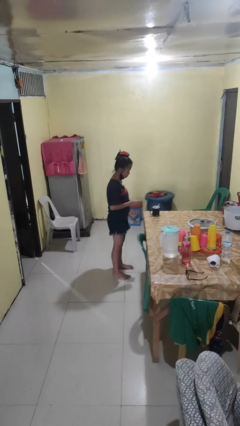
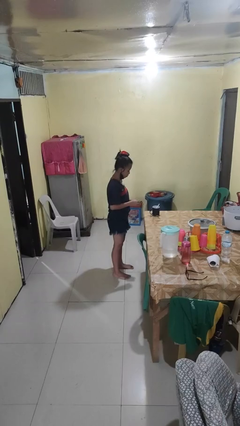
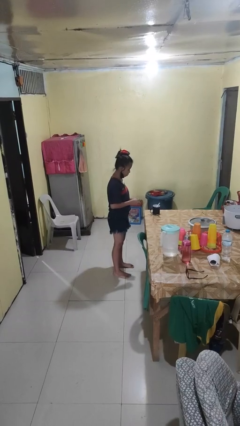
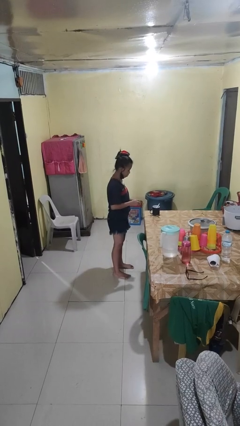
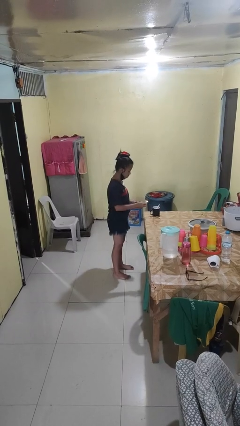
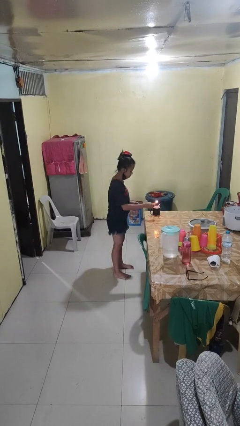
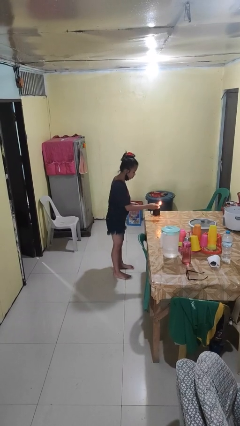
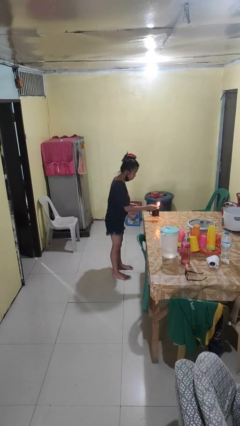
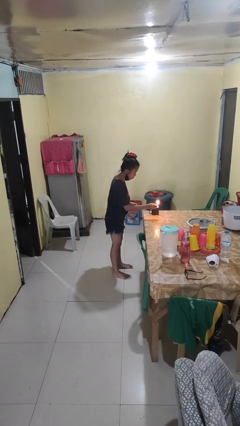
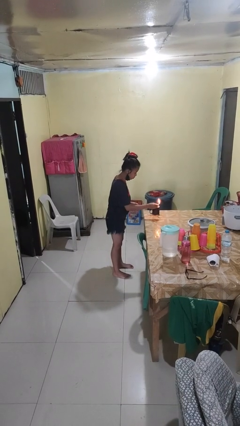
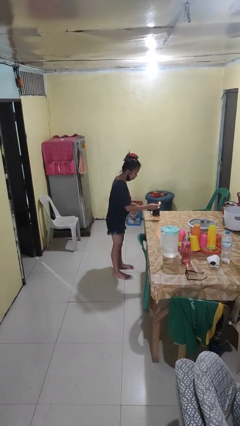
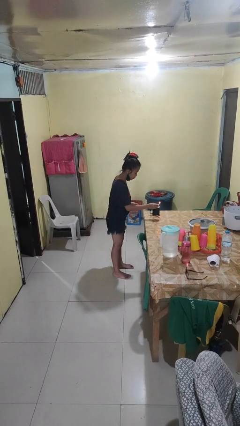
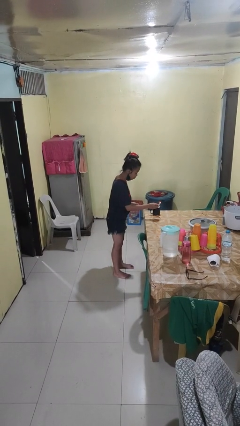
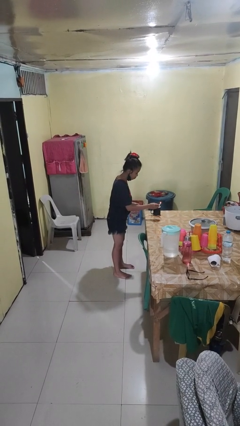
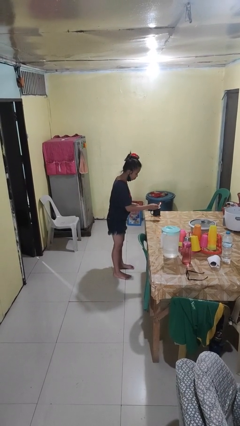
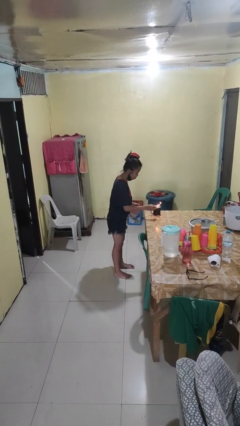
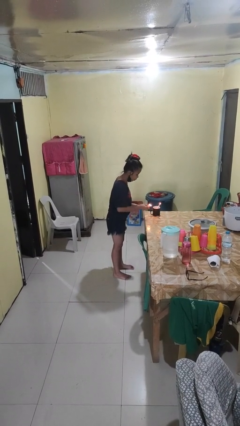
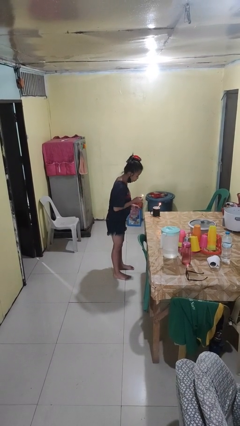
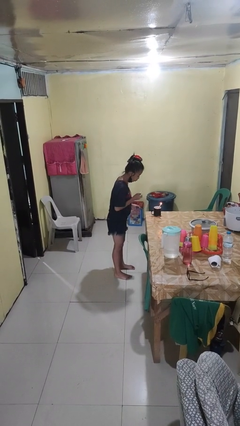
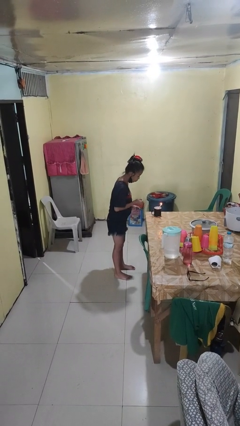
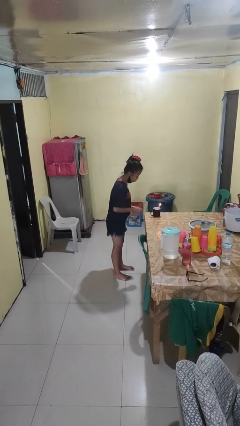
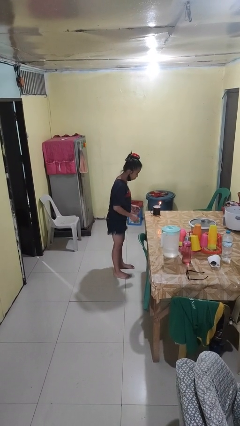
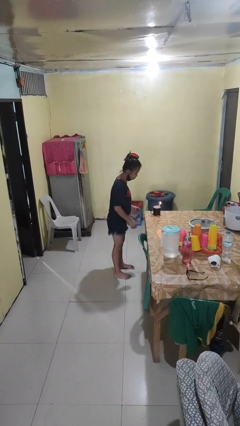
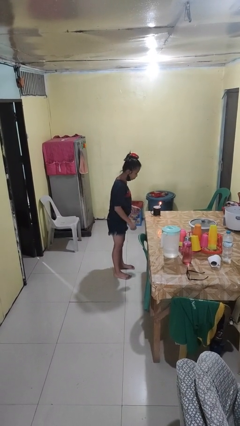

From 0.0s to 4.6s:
person lights candle

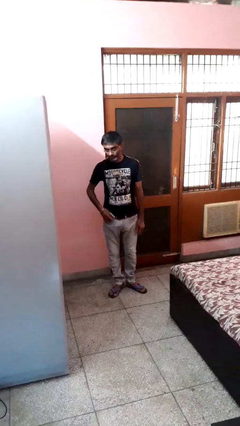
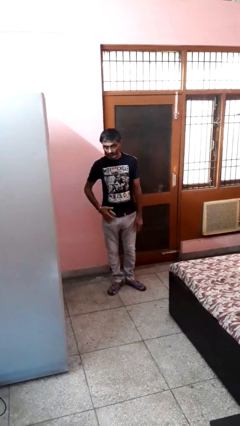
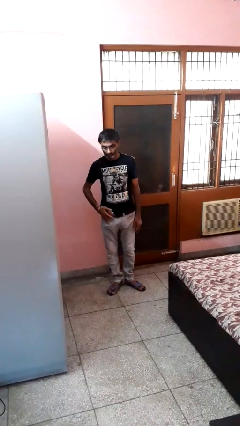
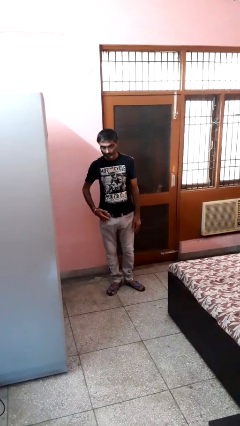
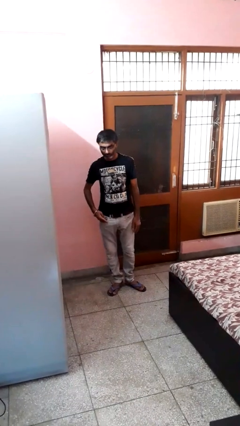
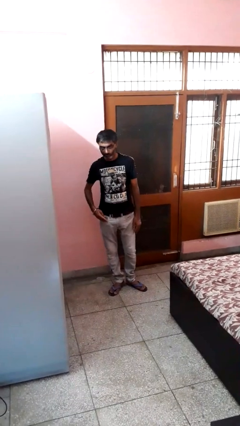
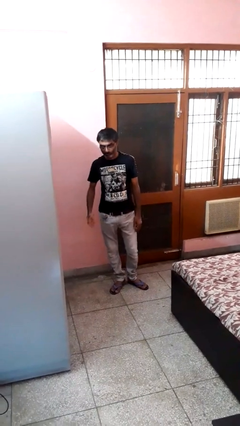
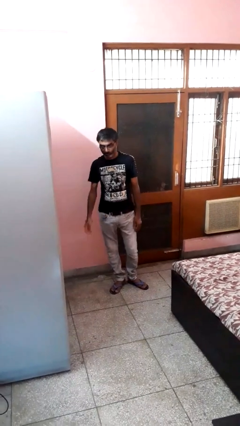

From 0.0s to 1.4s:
person puts phone into pocket

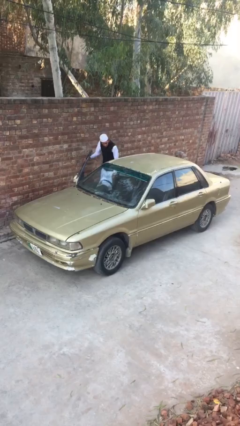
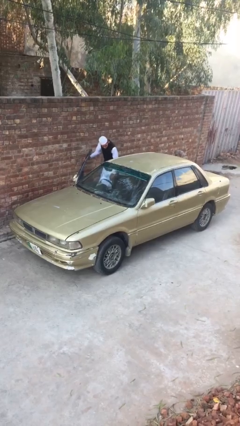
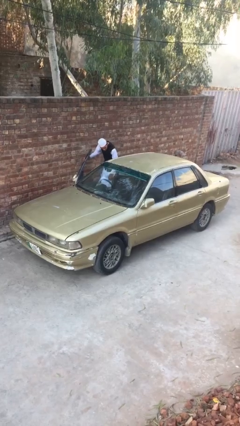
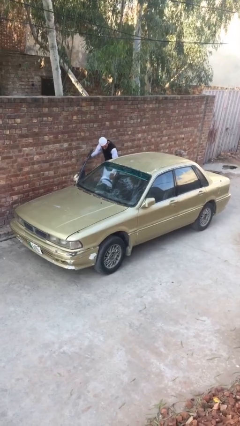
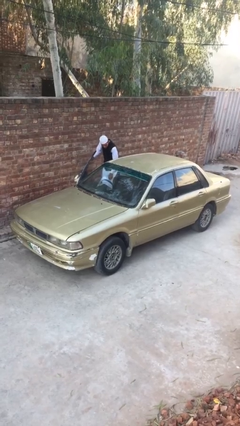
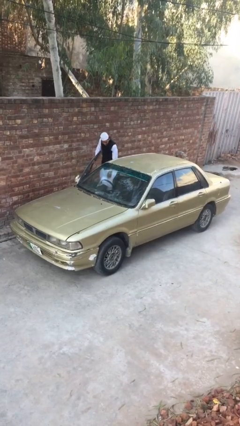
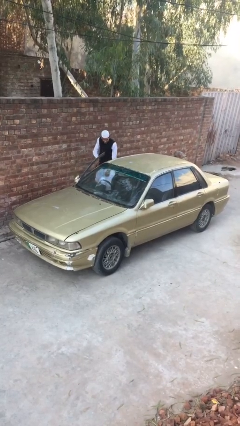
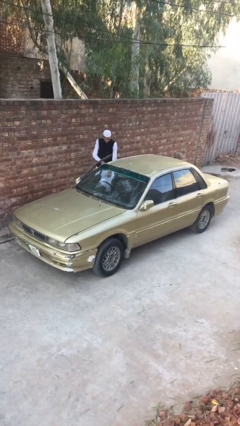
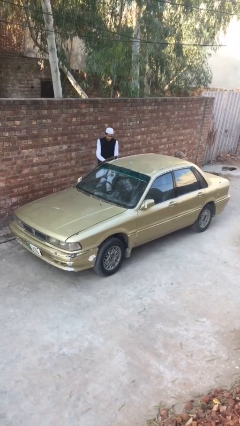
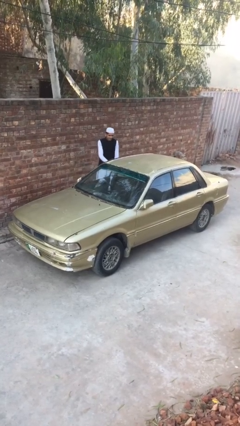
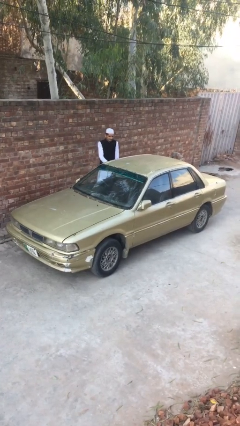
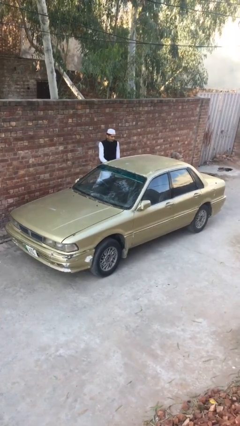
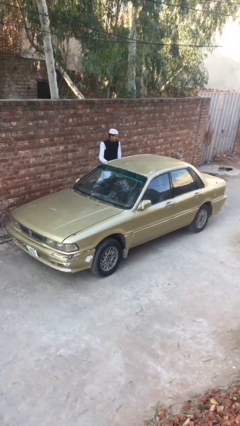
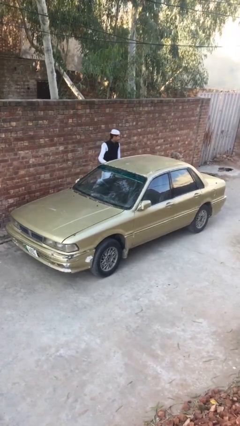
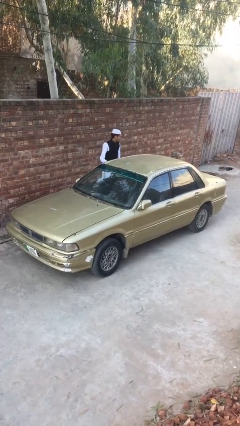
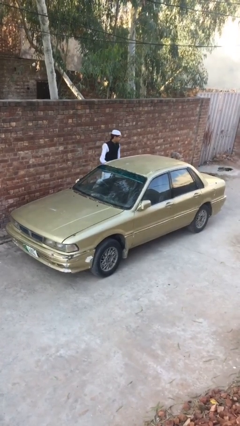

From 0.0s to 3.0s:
person closes car door

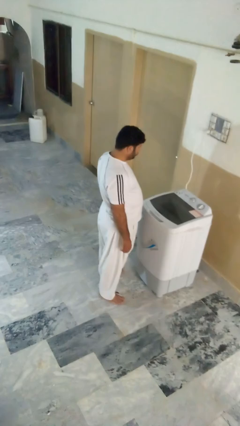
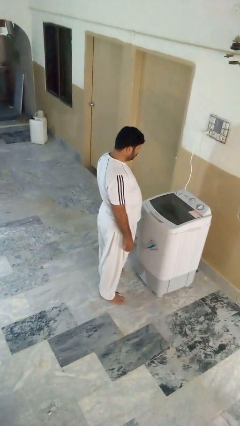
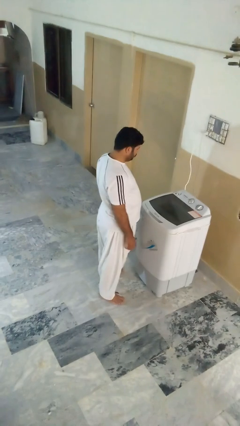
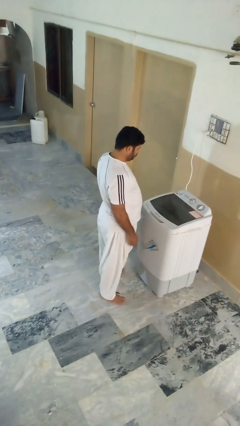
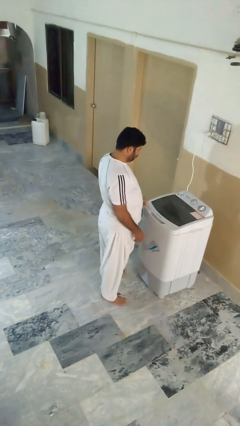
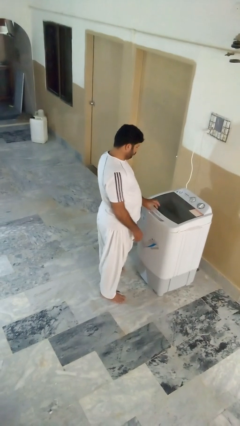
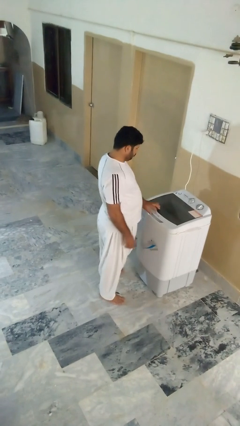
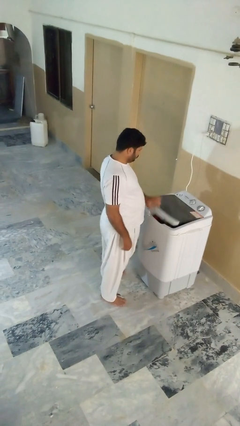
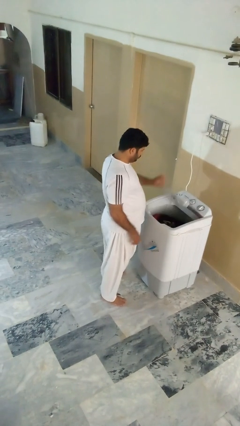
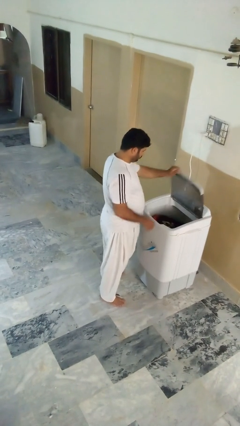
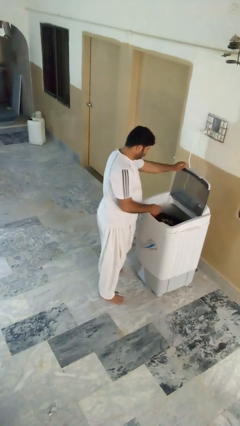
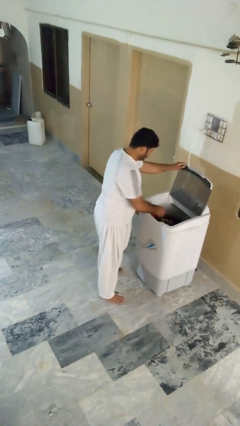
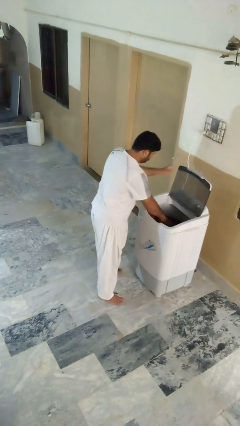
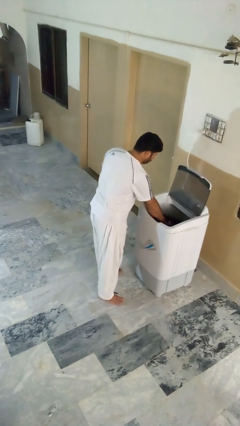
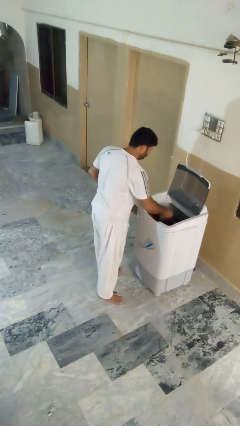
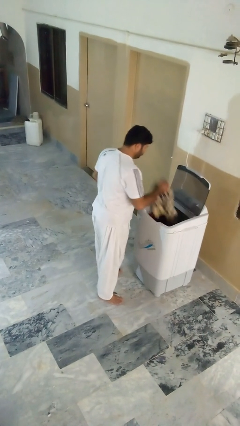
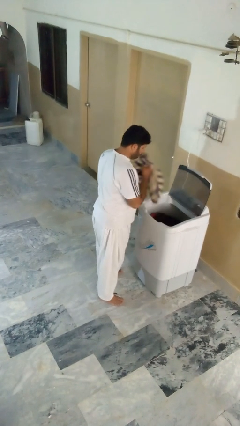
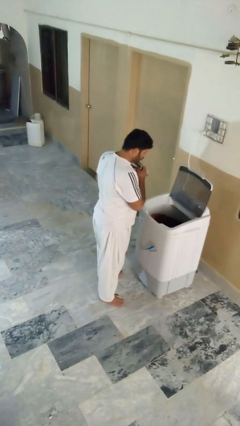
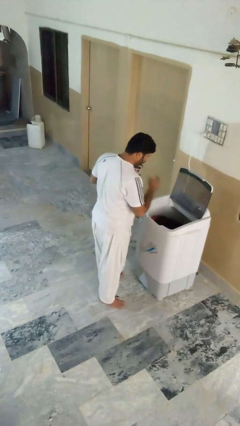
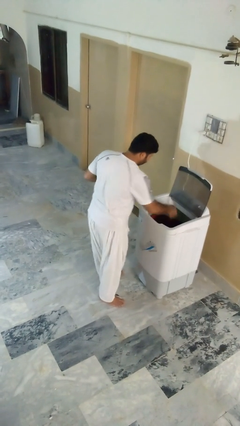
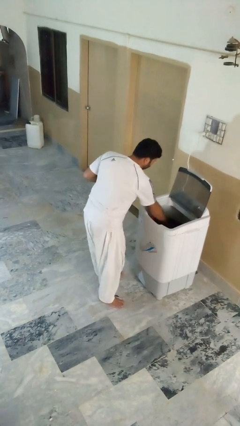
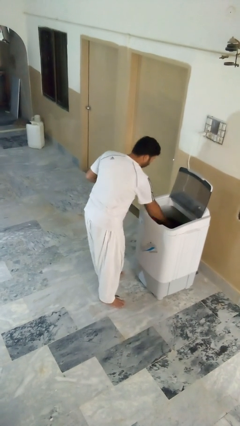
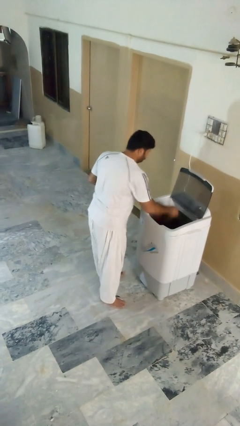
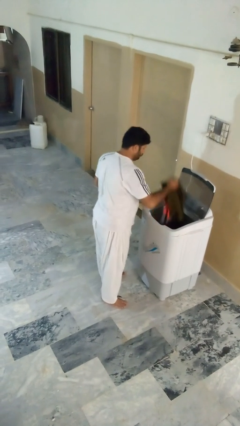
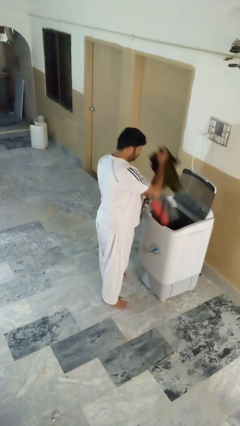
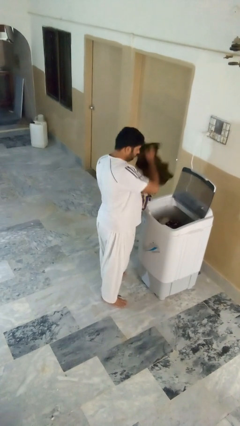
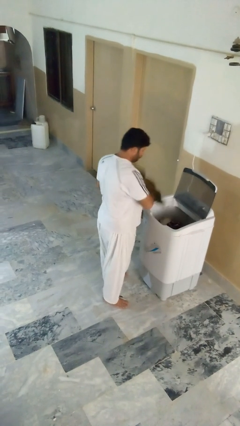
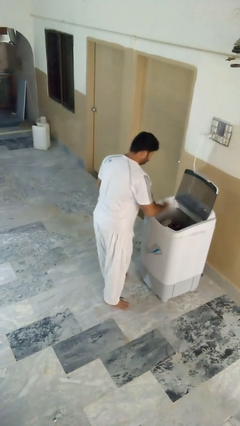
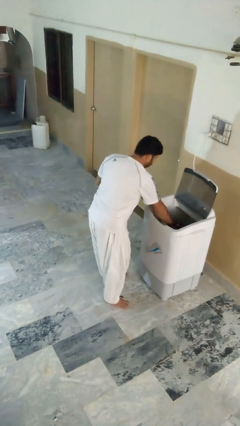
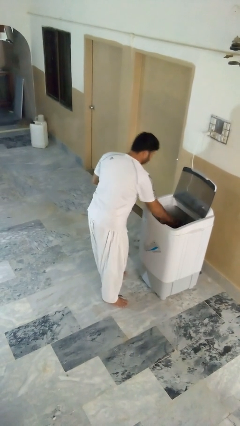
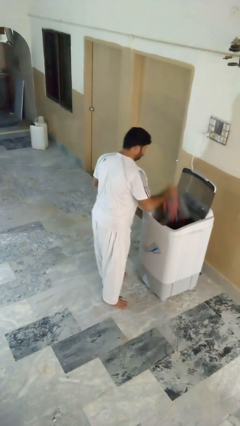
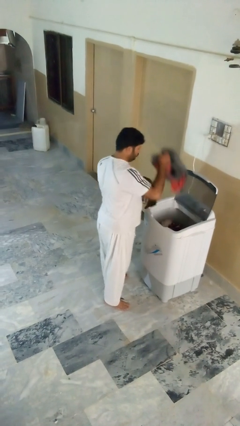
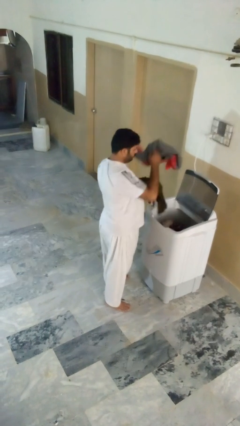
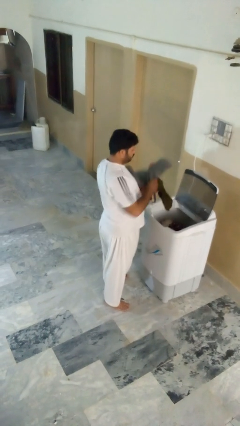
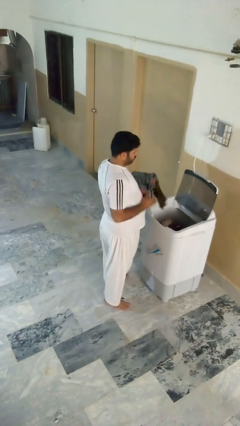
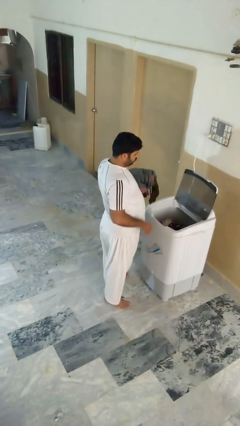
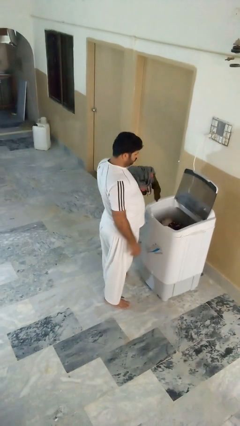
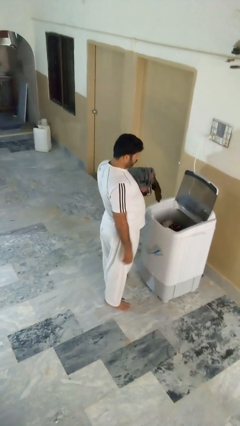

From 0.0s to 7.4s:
person unloads clotheswasher

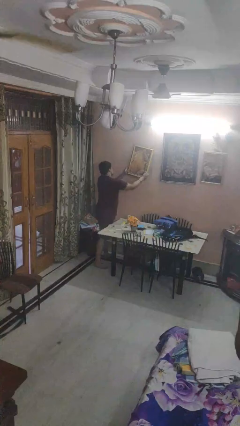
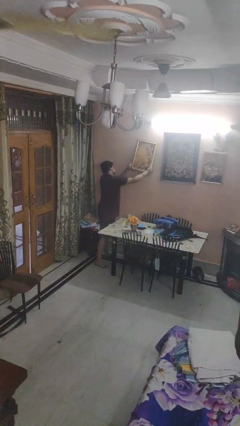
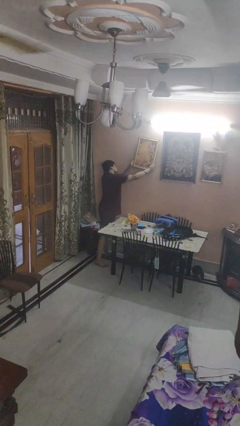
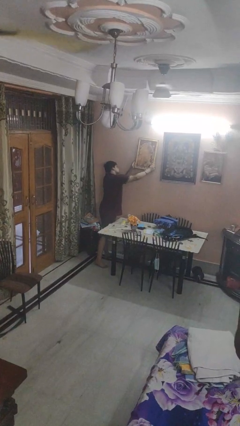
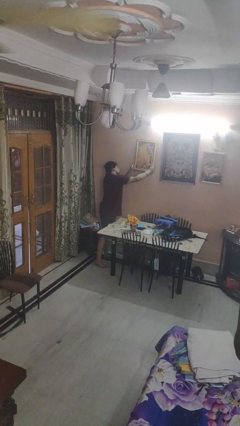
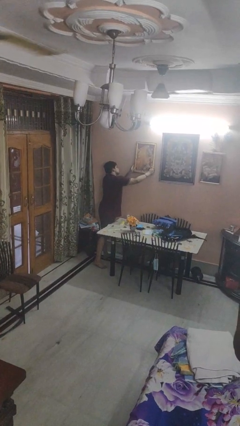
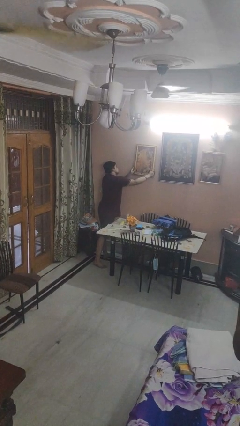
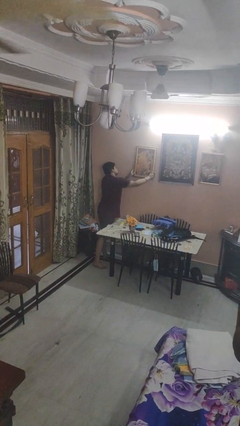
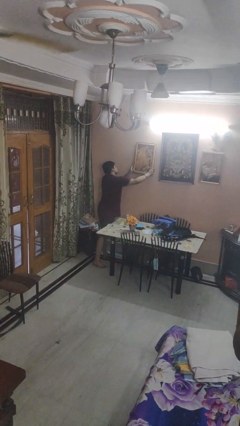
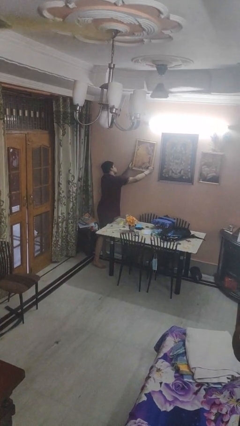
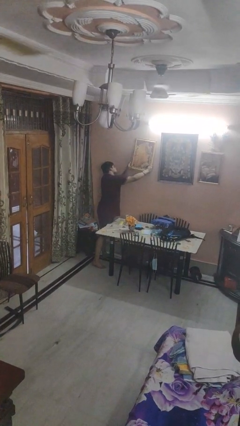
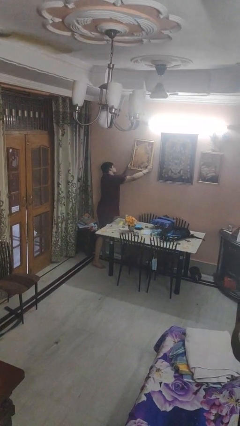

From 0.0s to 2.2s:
person puts up picture frame
